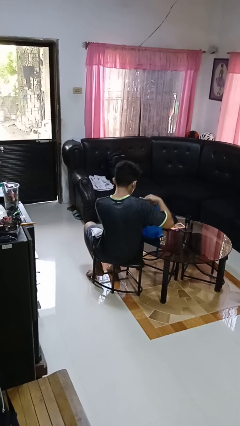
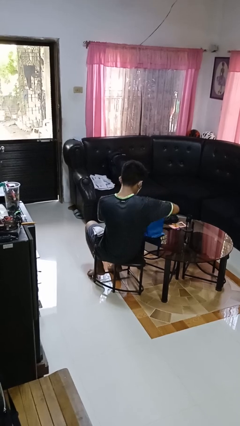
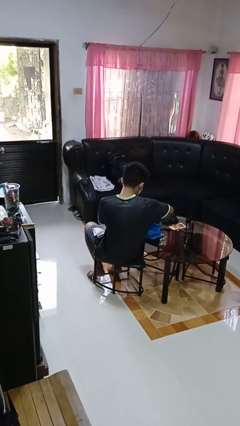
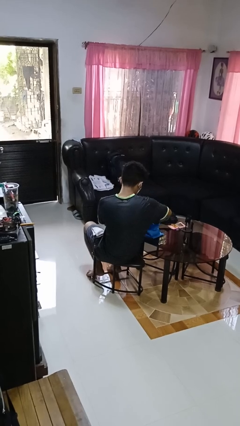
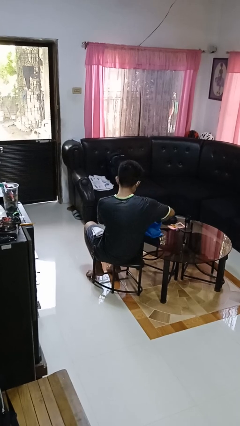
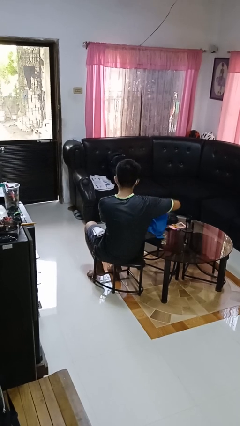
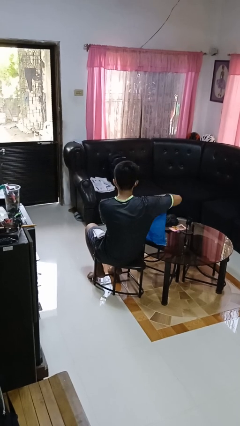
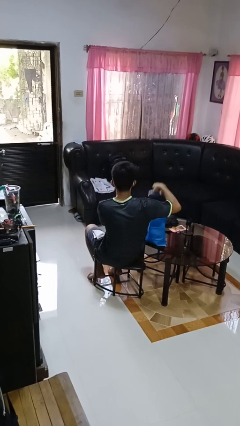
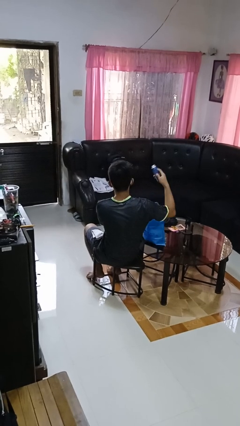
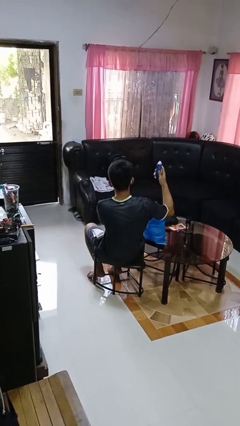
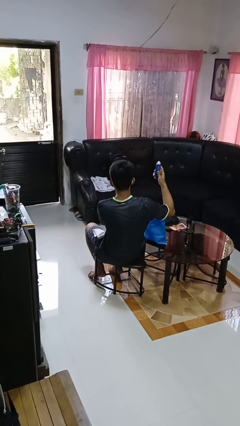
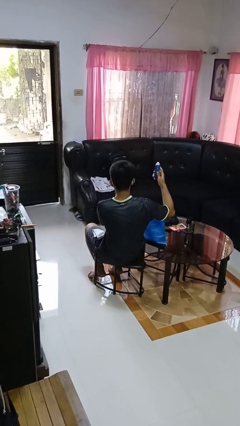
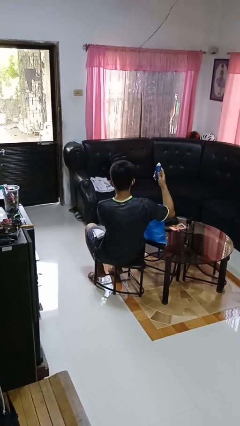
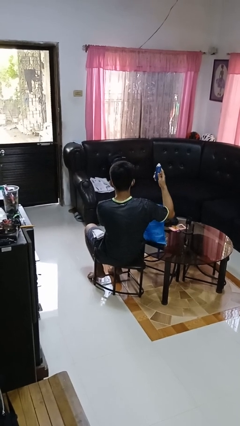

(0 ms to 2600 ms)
person takes object from bag

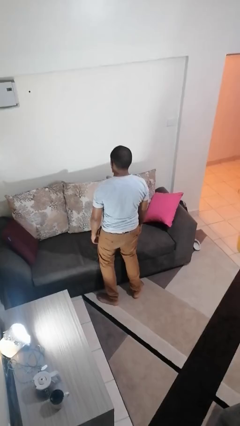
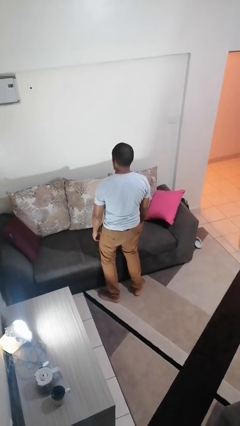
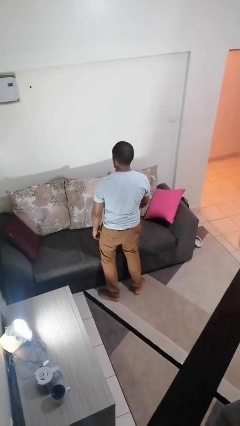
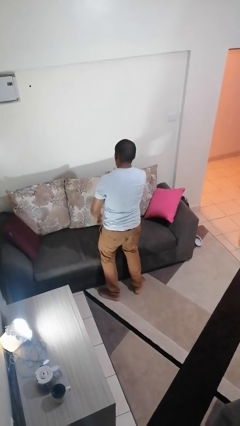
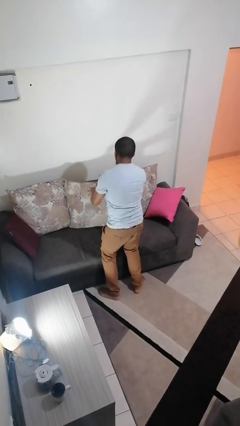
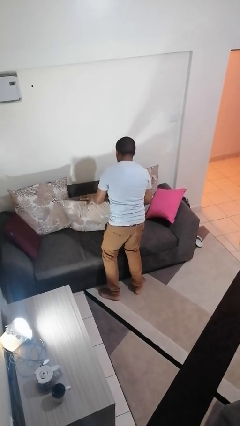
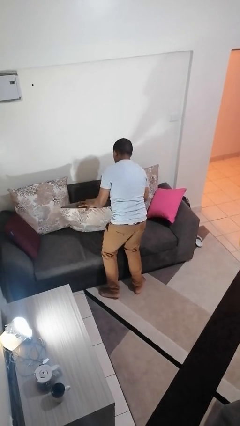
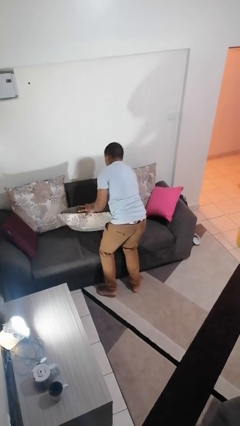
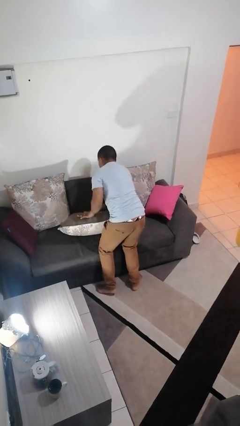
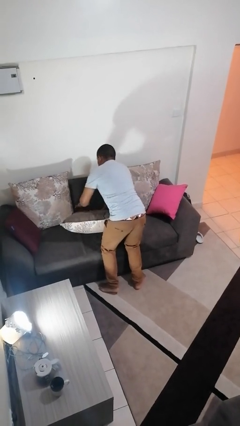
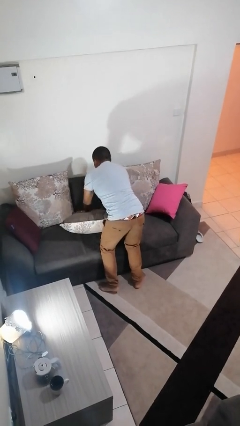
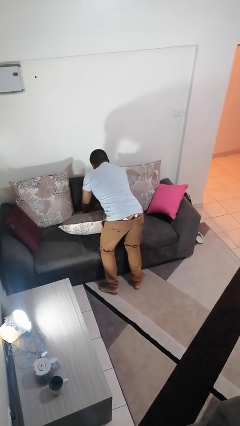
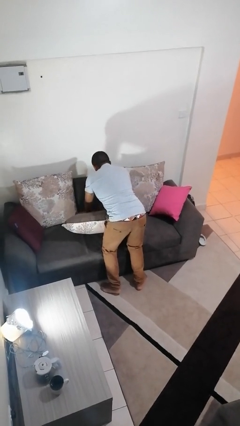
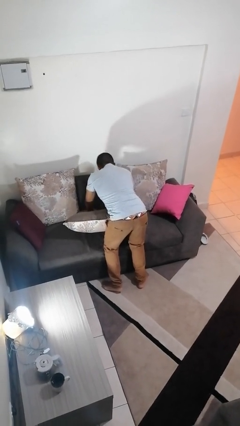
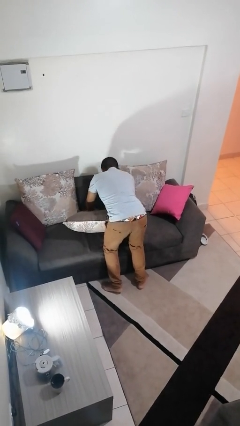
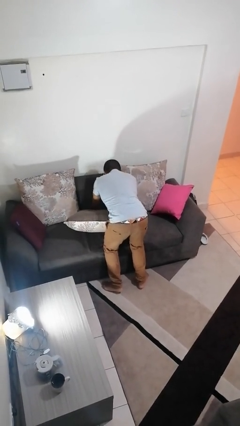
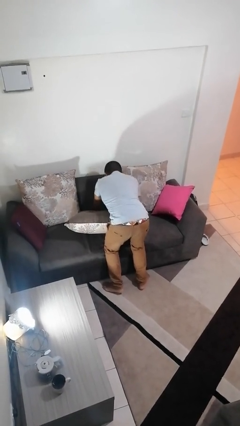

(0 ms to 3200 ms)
person searches in couch

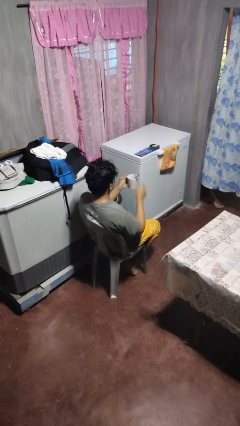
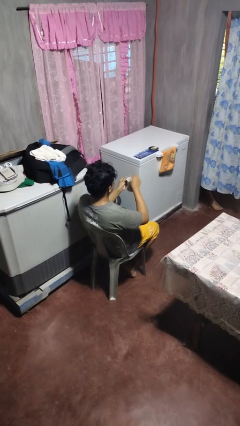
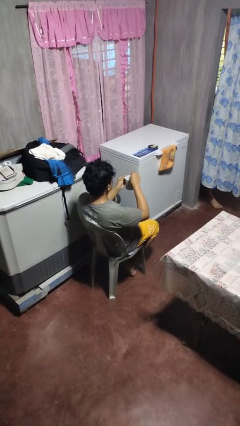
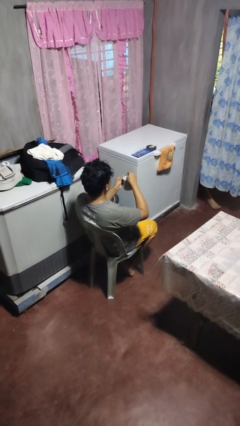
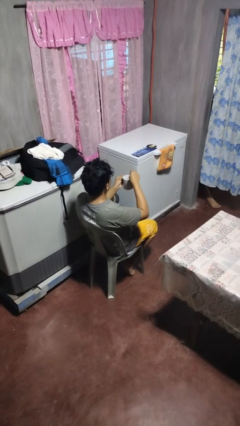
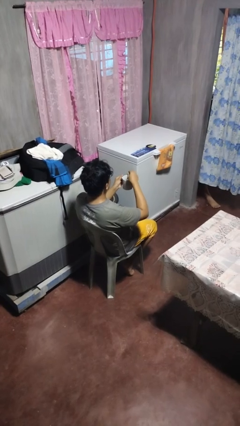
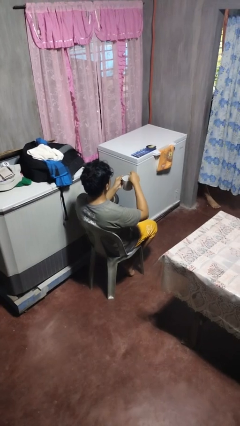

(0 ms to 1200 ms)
person stirs mug

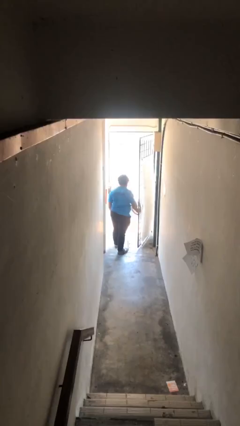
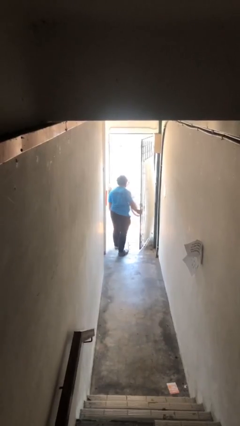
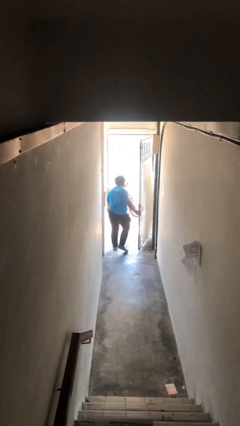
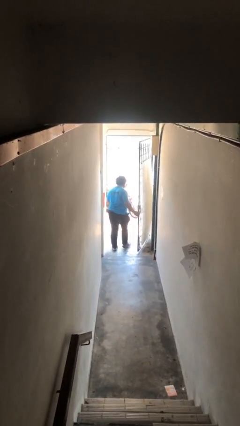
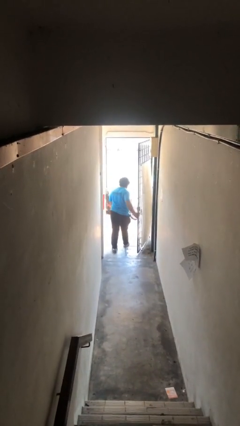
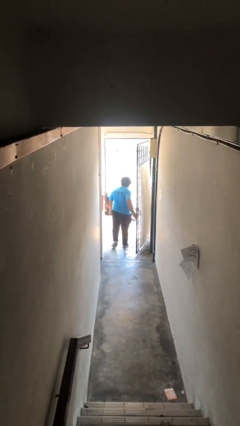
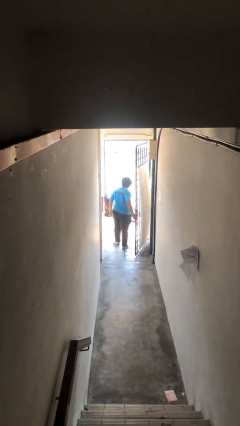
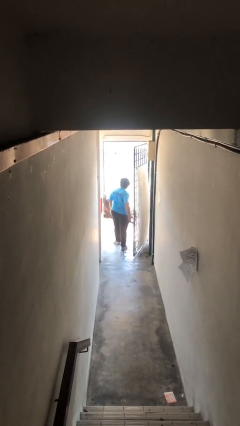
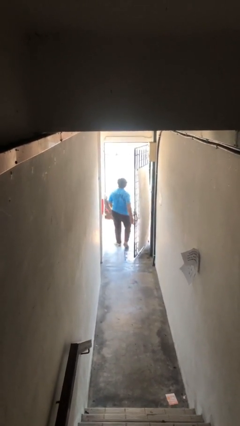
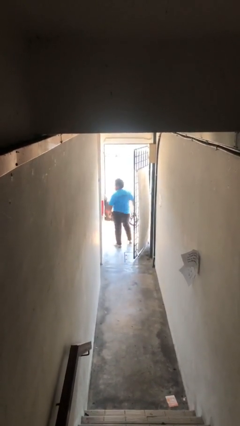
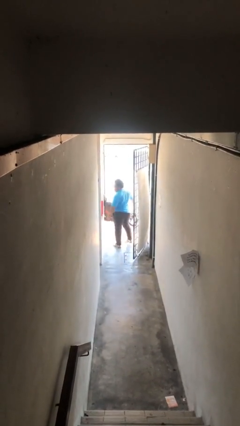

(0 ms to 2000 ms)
person exits scene through structure

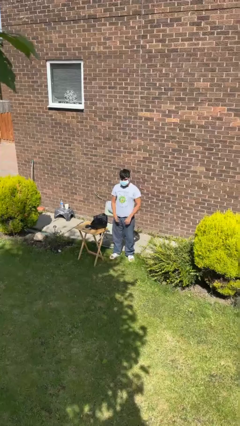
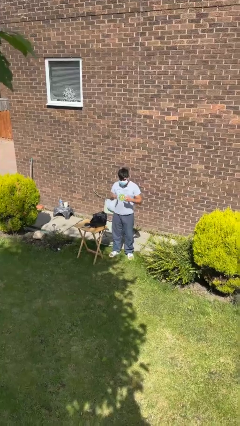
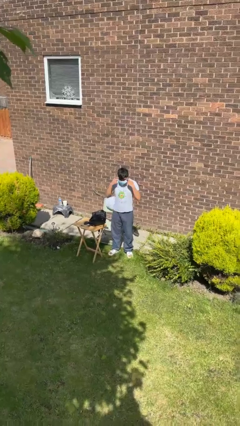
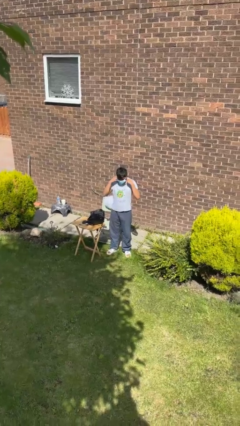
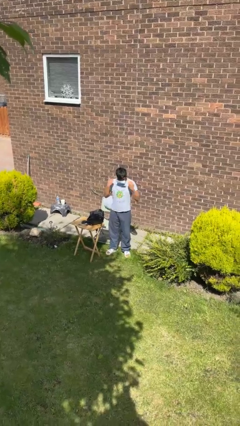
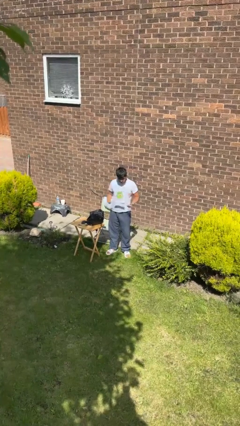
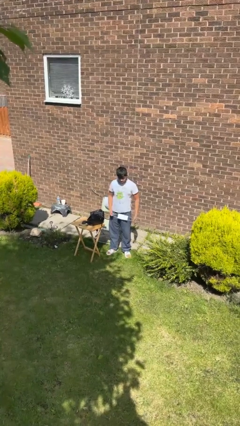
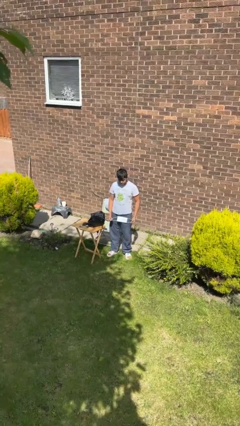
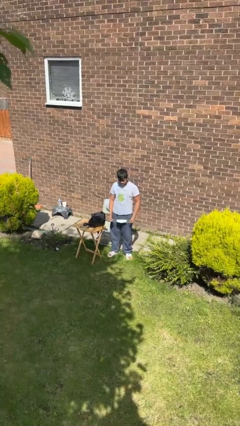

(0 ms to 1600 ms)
person takes off facemask

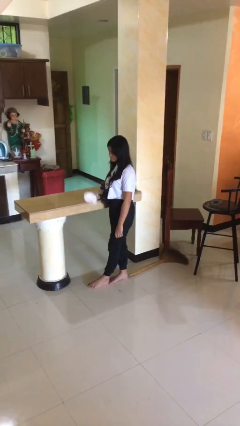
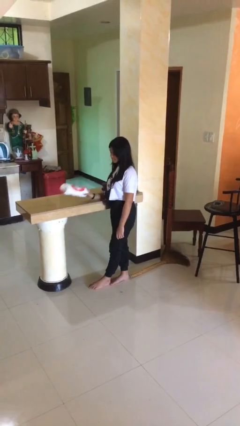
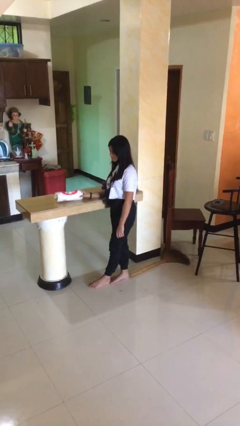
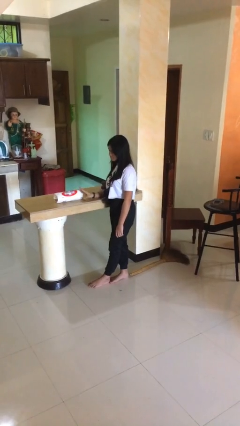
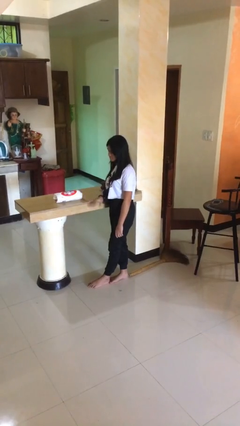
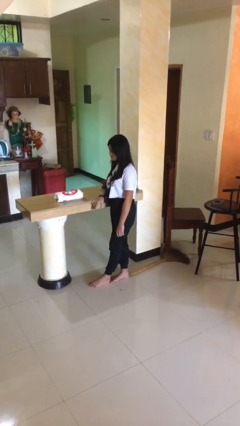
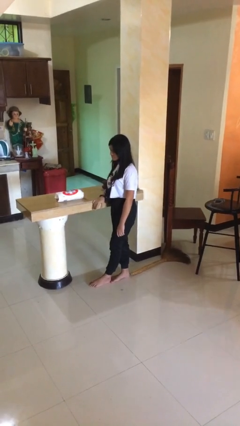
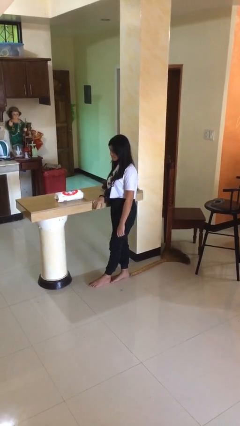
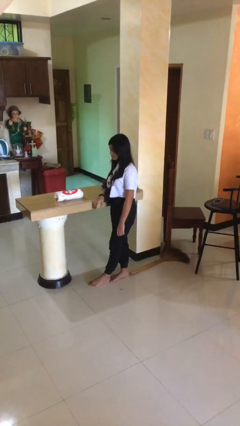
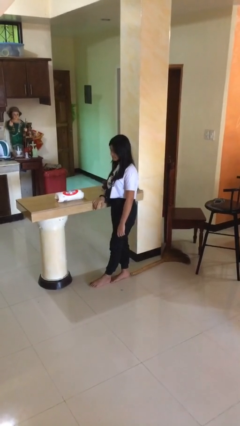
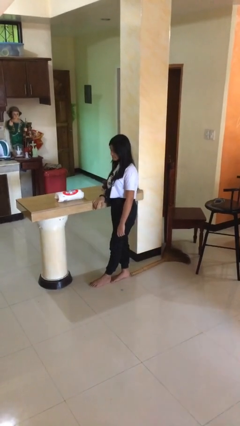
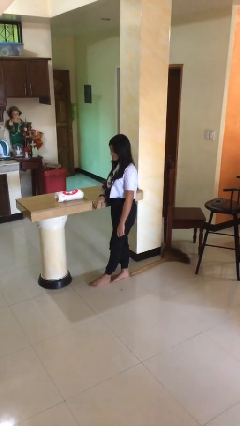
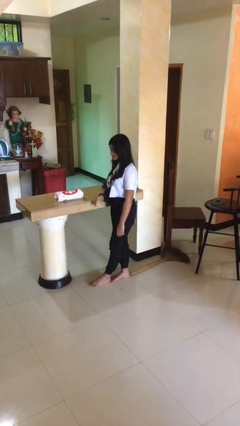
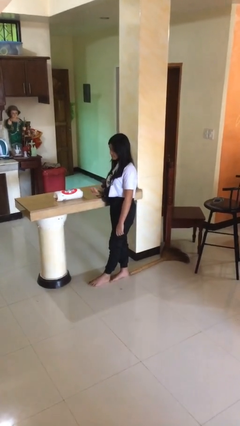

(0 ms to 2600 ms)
person puts down object on countertop

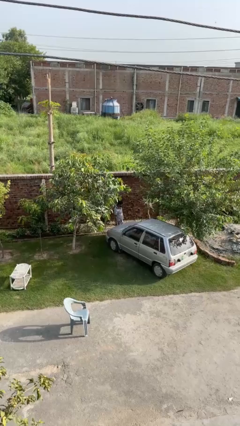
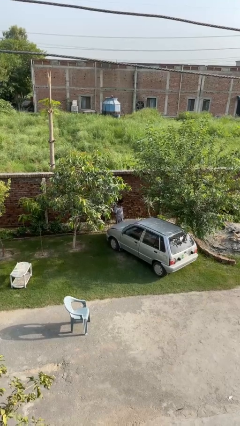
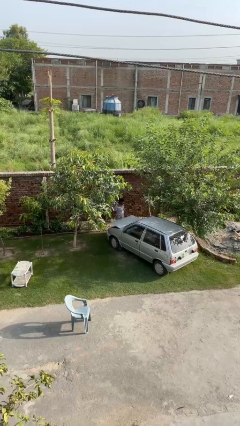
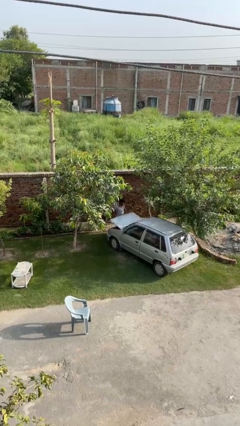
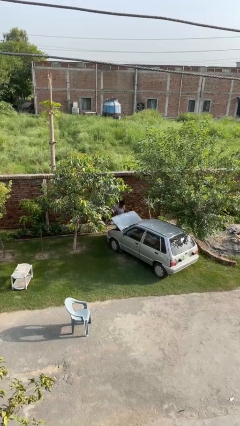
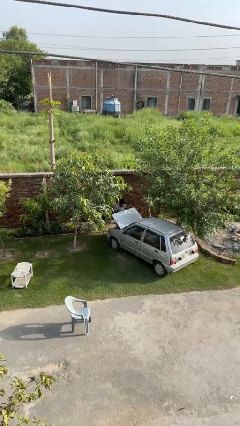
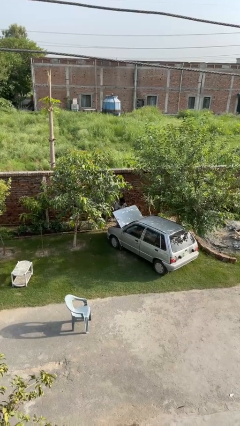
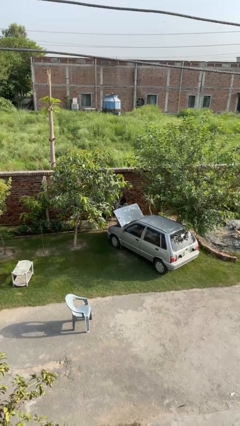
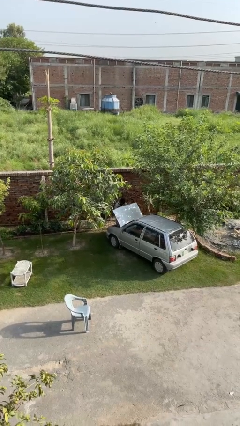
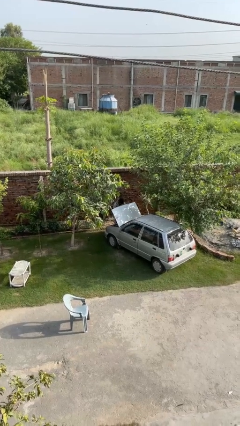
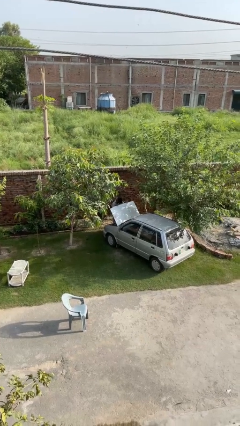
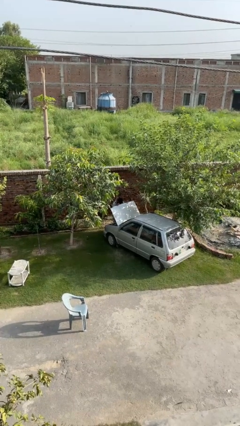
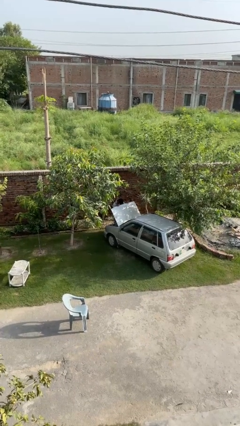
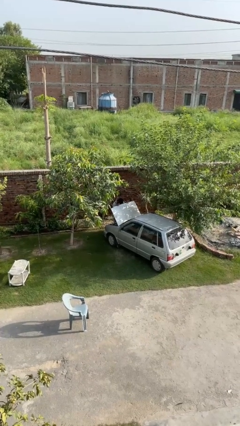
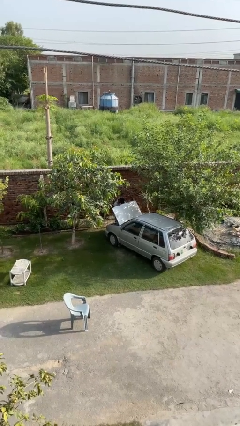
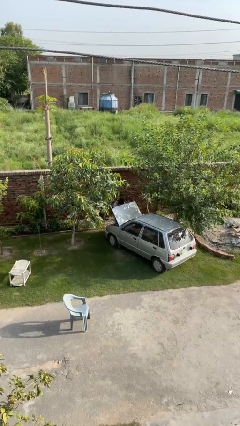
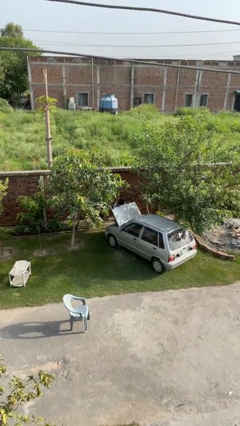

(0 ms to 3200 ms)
person opens car hood

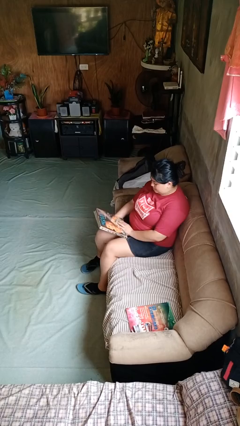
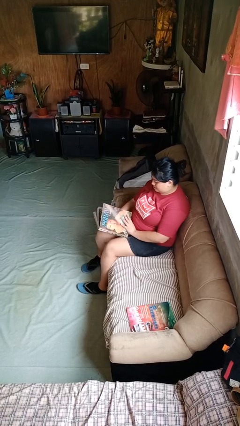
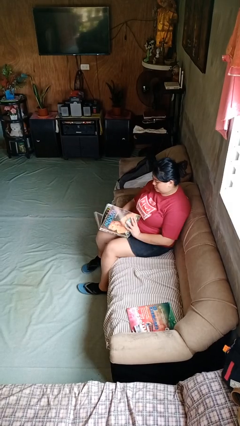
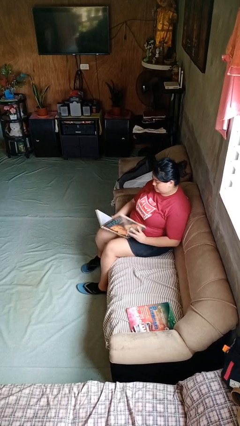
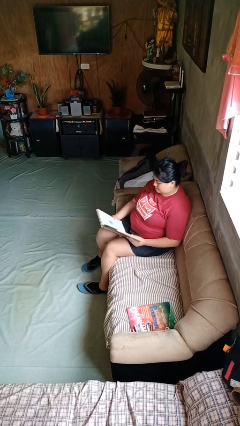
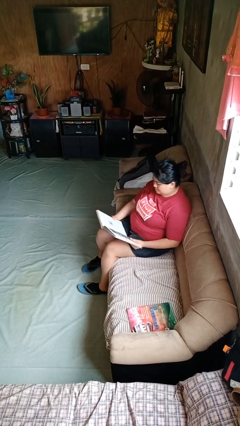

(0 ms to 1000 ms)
person reads book
